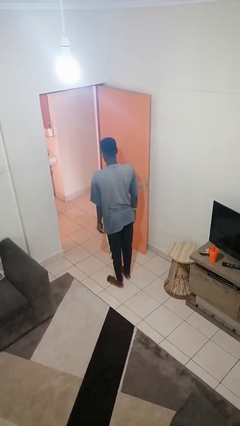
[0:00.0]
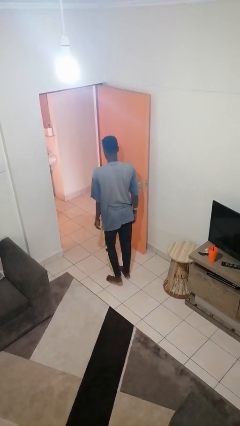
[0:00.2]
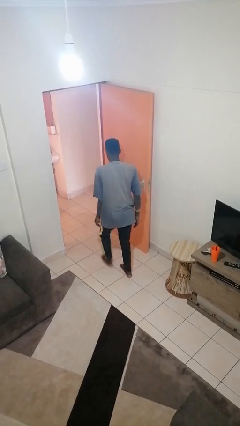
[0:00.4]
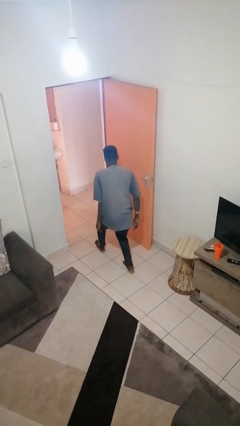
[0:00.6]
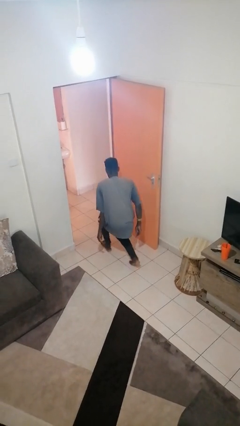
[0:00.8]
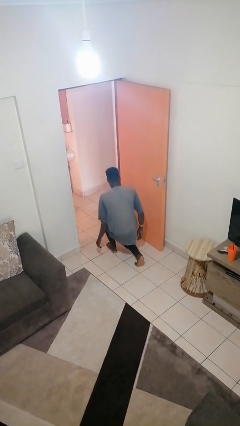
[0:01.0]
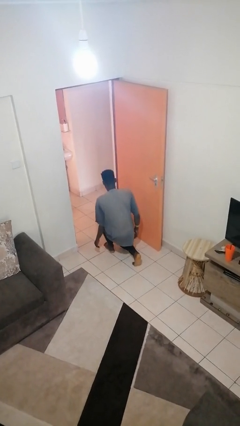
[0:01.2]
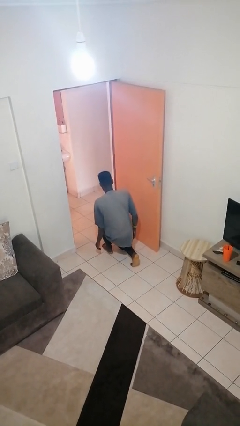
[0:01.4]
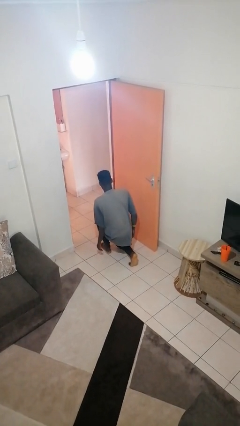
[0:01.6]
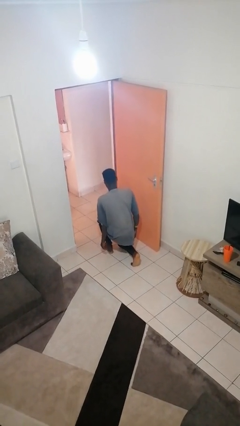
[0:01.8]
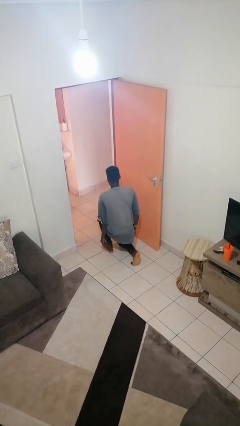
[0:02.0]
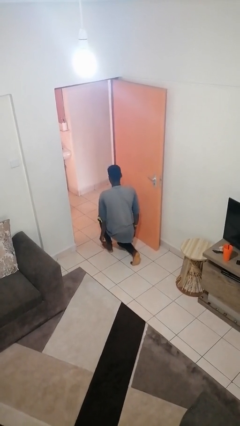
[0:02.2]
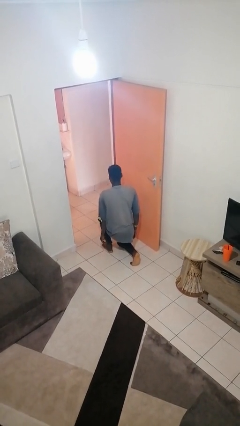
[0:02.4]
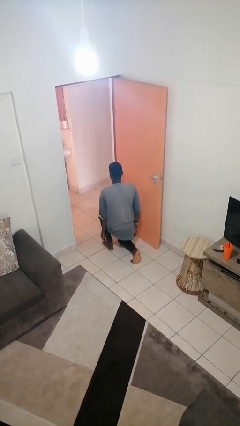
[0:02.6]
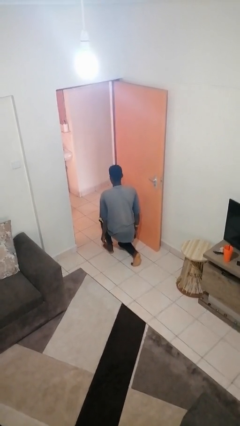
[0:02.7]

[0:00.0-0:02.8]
person kneels

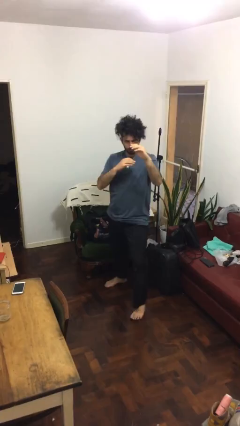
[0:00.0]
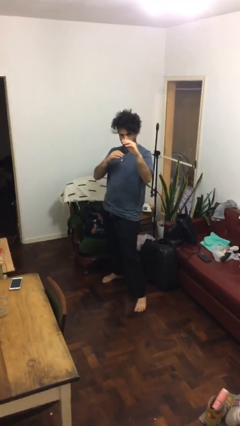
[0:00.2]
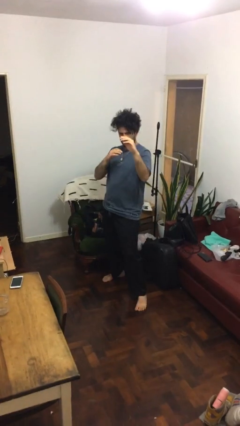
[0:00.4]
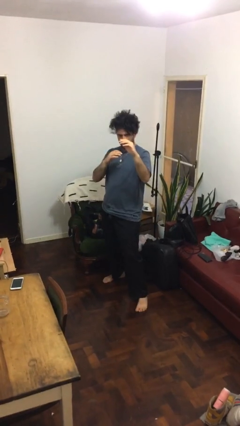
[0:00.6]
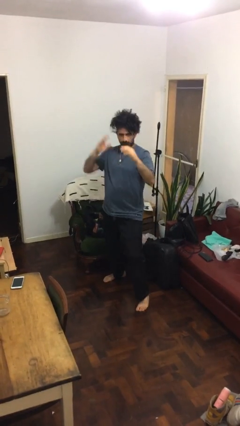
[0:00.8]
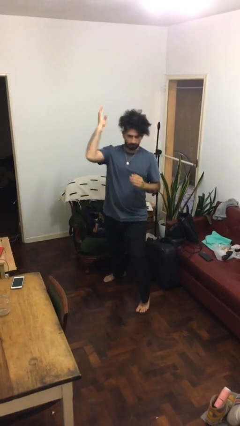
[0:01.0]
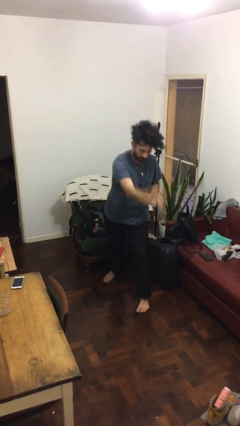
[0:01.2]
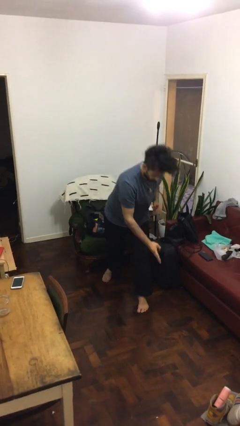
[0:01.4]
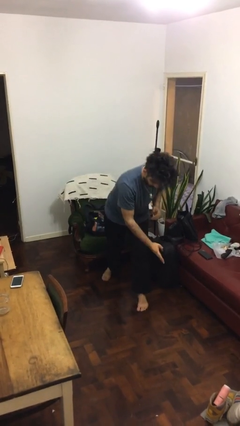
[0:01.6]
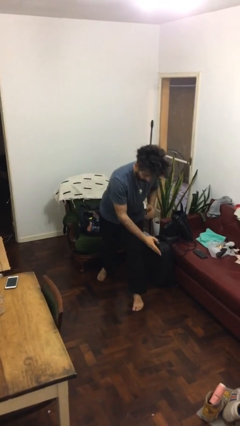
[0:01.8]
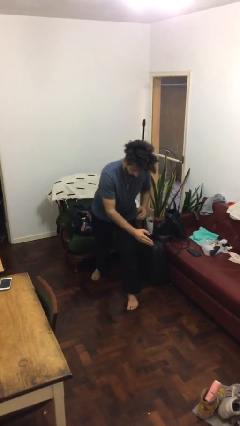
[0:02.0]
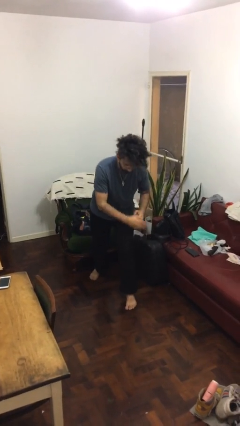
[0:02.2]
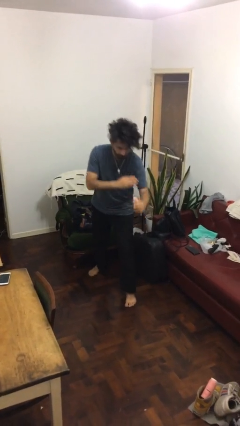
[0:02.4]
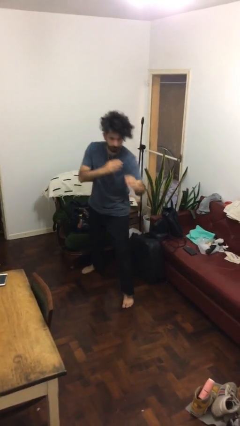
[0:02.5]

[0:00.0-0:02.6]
person karate chop

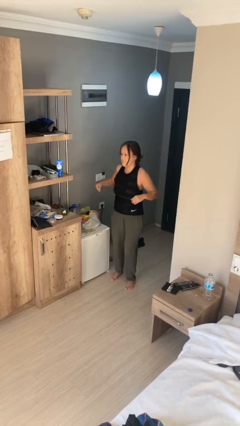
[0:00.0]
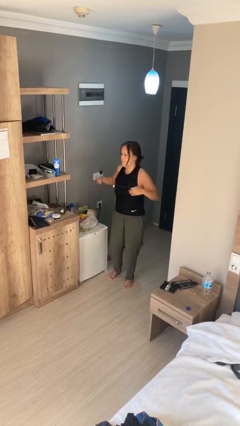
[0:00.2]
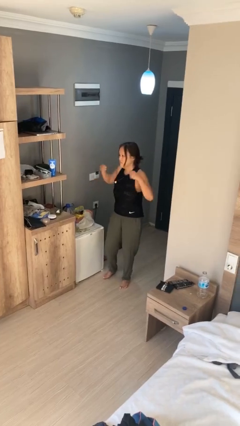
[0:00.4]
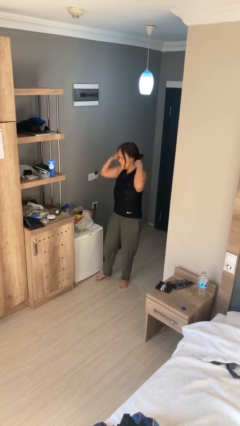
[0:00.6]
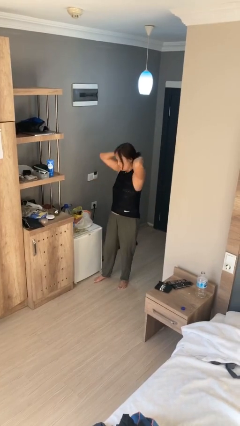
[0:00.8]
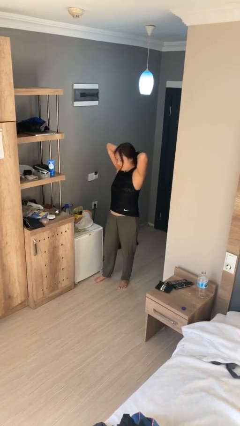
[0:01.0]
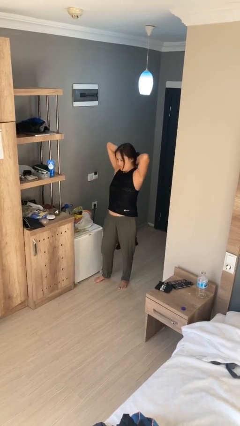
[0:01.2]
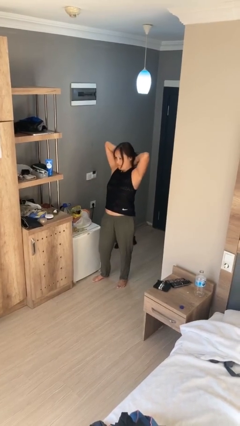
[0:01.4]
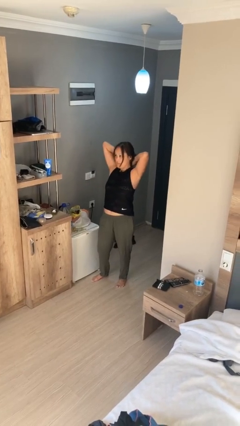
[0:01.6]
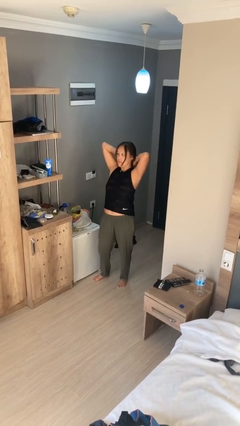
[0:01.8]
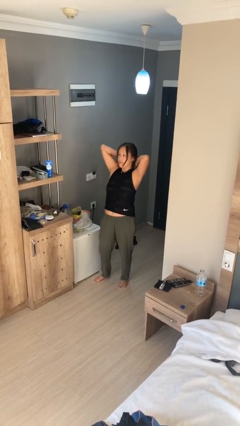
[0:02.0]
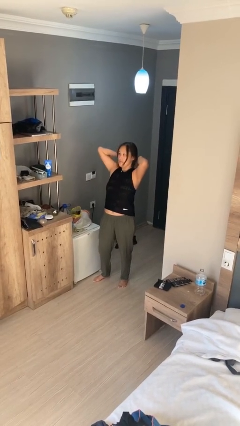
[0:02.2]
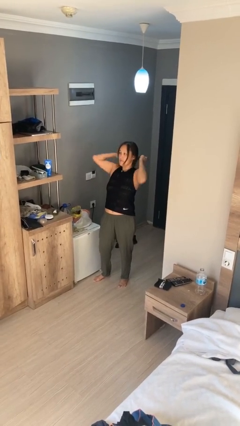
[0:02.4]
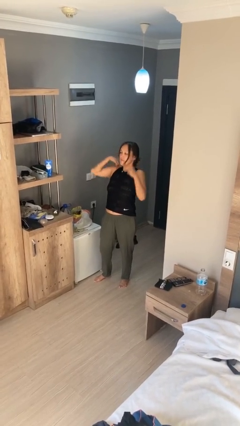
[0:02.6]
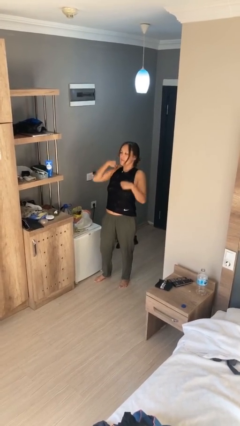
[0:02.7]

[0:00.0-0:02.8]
person puts on necklace

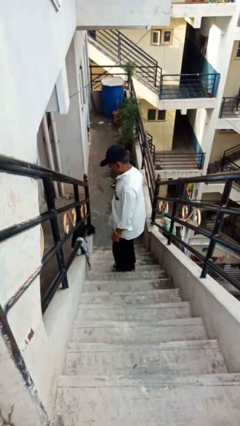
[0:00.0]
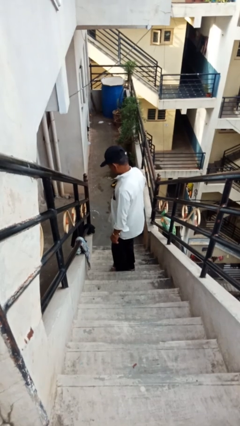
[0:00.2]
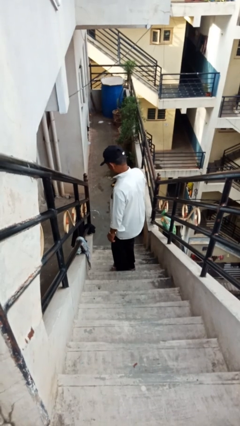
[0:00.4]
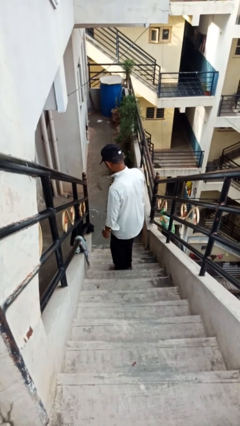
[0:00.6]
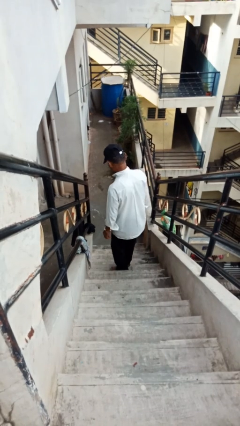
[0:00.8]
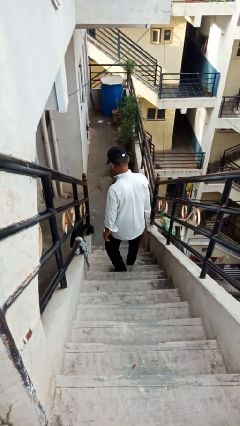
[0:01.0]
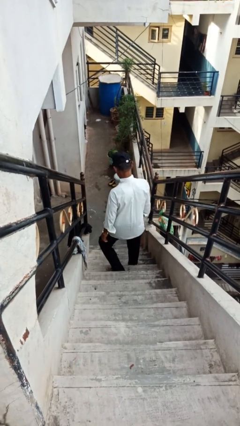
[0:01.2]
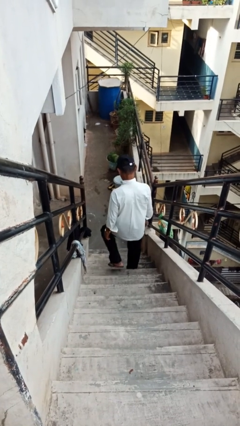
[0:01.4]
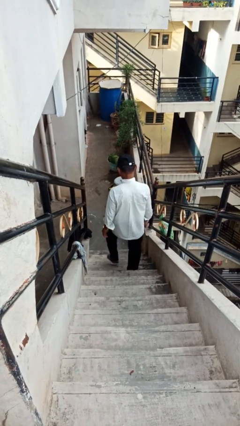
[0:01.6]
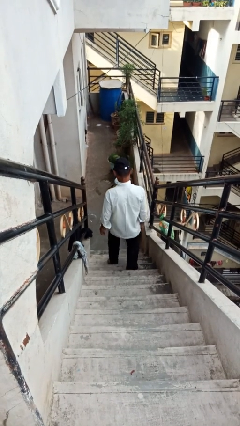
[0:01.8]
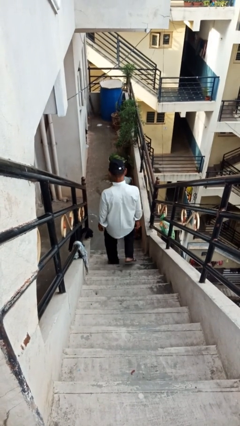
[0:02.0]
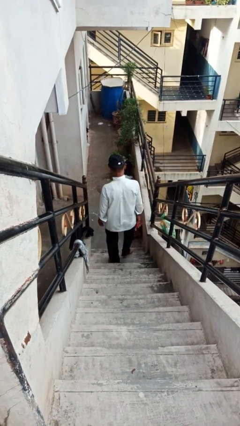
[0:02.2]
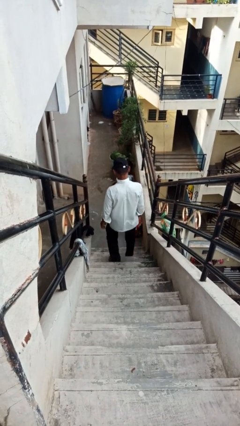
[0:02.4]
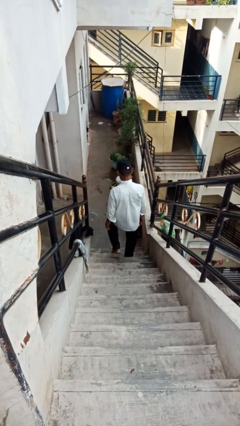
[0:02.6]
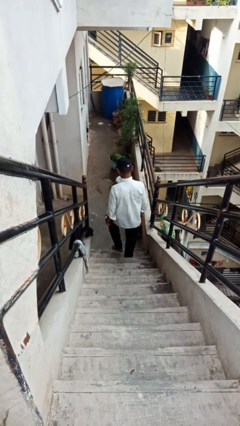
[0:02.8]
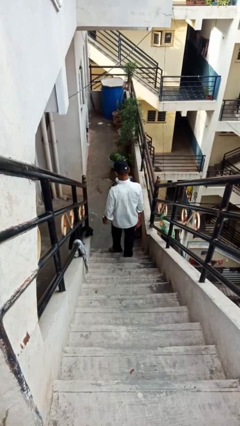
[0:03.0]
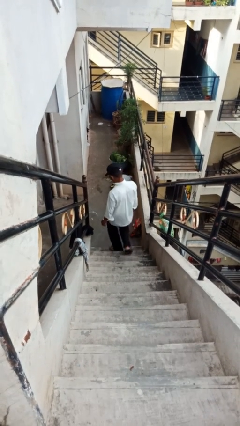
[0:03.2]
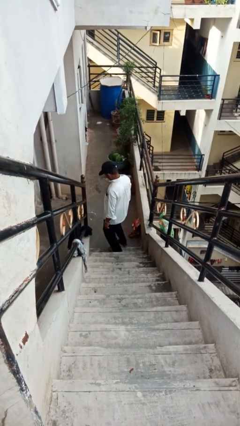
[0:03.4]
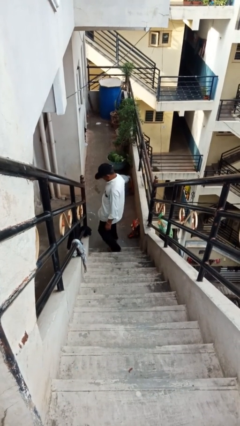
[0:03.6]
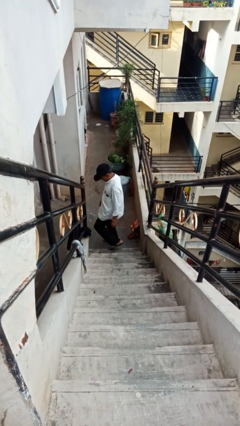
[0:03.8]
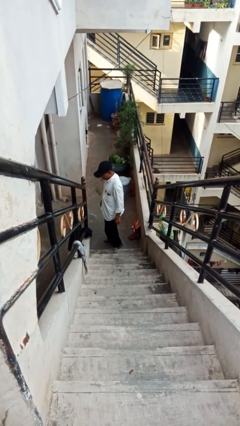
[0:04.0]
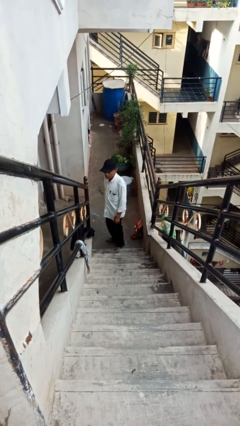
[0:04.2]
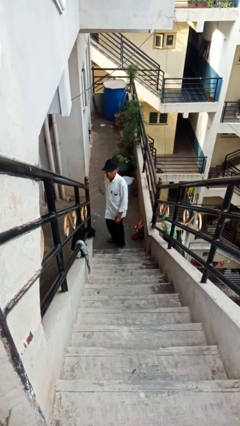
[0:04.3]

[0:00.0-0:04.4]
person climbs down stairs

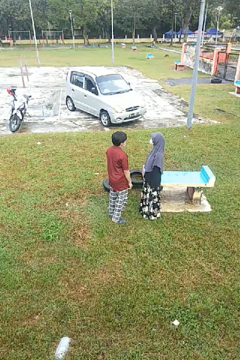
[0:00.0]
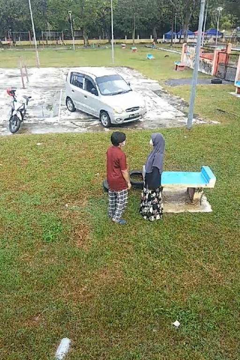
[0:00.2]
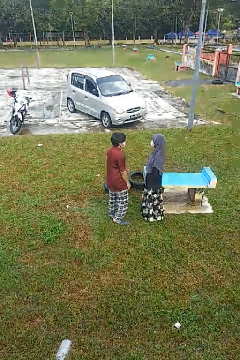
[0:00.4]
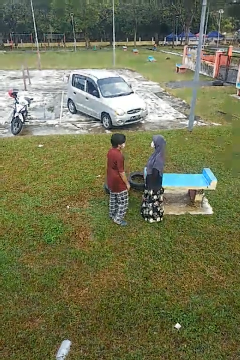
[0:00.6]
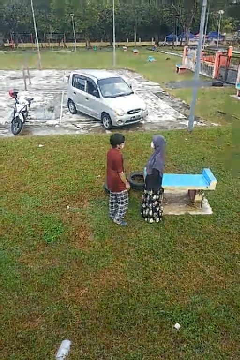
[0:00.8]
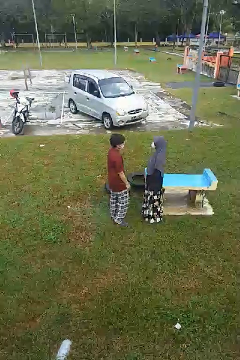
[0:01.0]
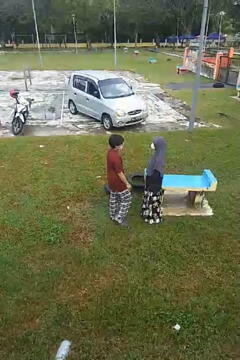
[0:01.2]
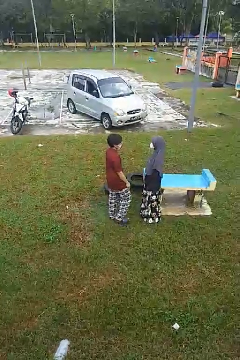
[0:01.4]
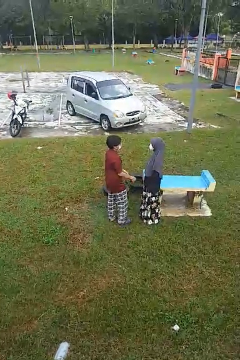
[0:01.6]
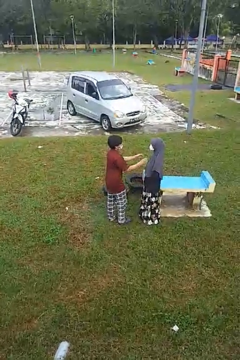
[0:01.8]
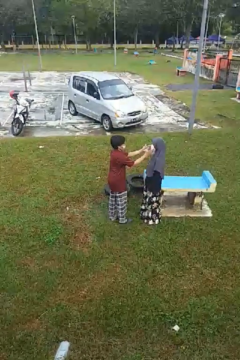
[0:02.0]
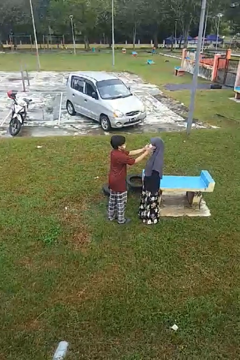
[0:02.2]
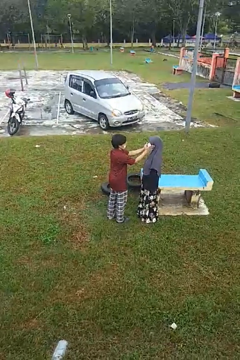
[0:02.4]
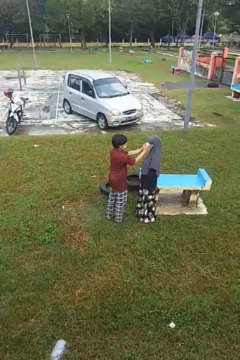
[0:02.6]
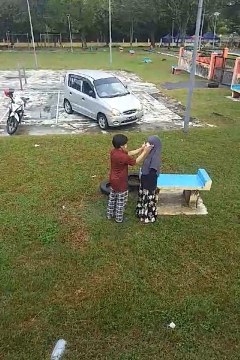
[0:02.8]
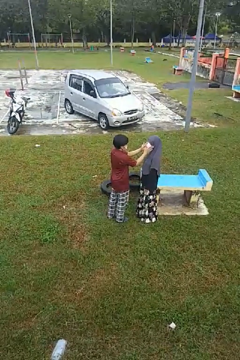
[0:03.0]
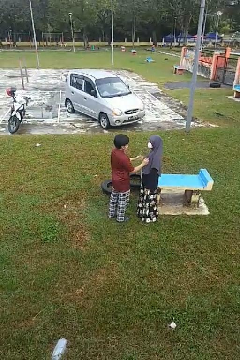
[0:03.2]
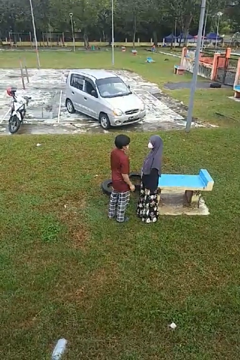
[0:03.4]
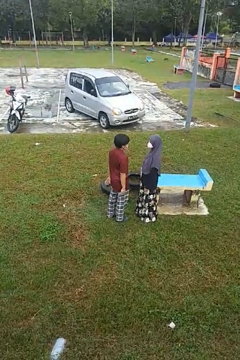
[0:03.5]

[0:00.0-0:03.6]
person touches face of person

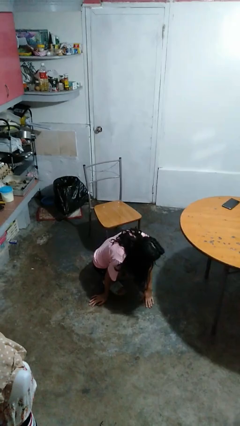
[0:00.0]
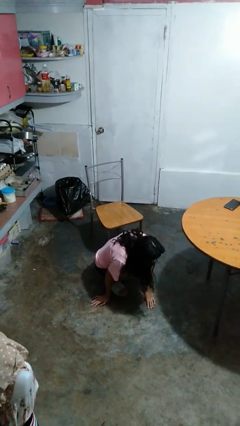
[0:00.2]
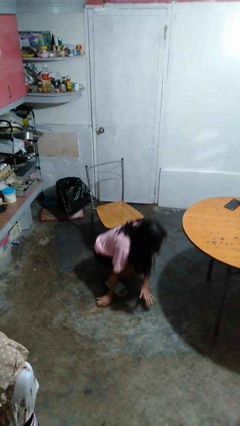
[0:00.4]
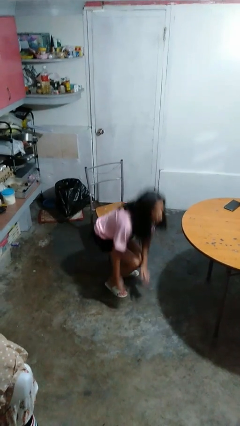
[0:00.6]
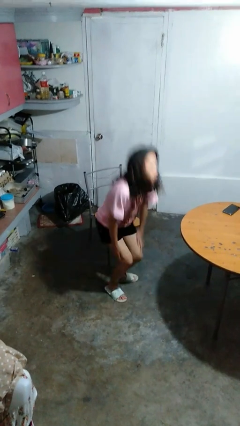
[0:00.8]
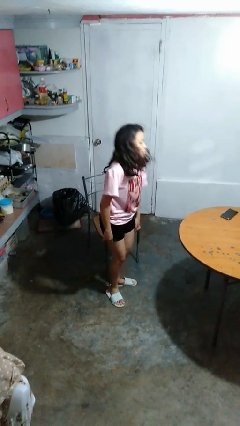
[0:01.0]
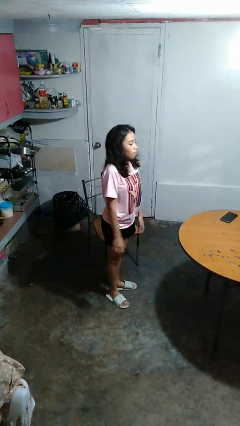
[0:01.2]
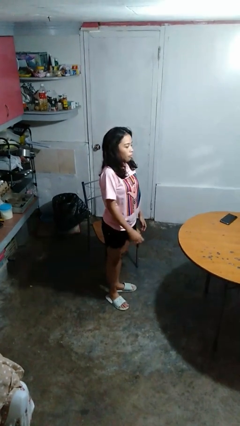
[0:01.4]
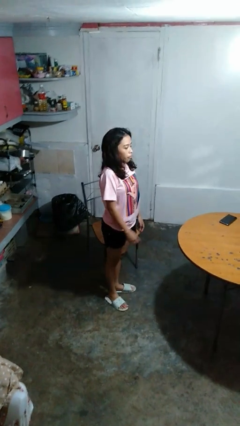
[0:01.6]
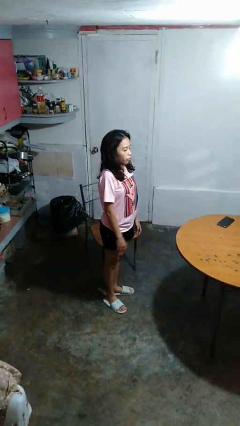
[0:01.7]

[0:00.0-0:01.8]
person stands up from floor
